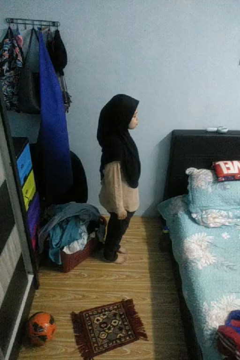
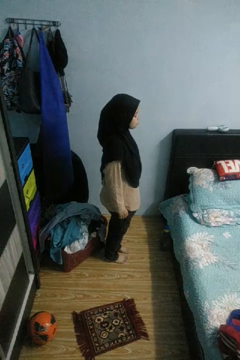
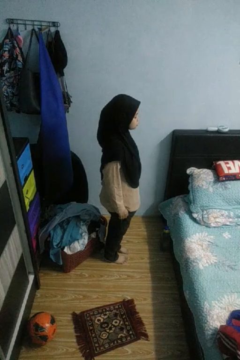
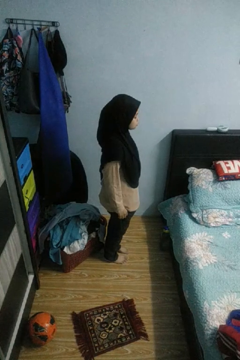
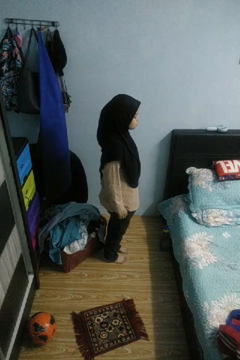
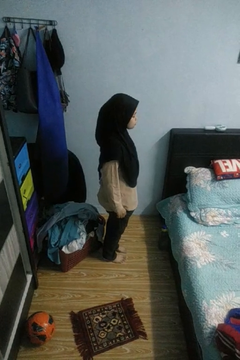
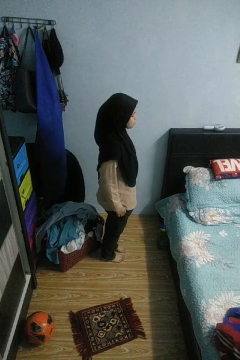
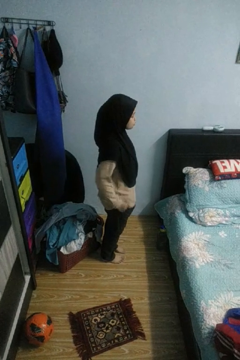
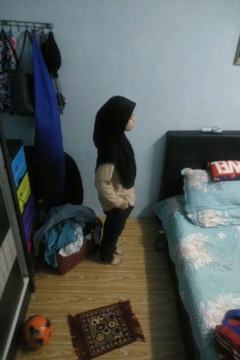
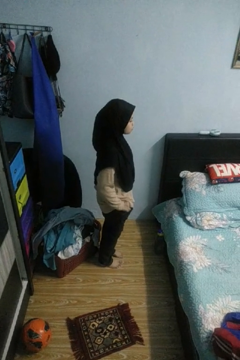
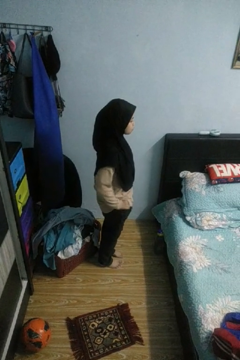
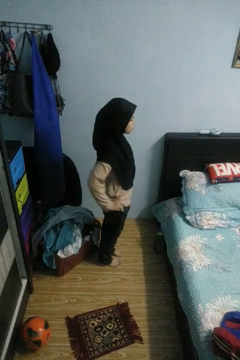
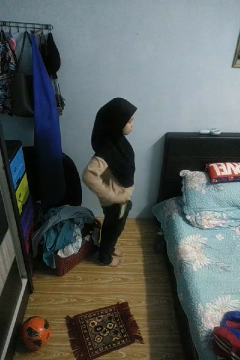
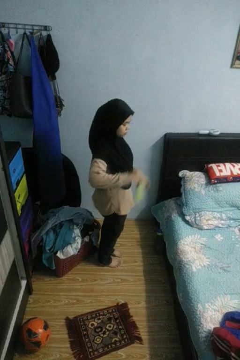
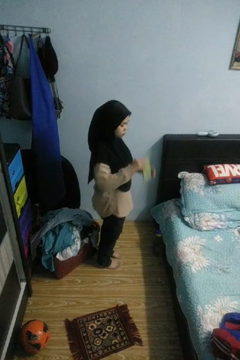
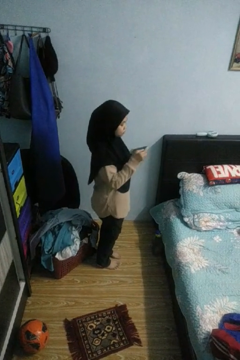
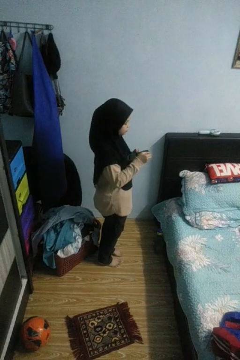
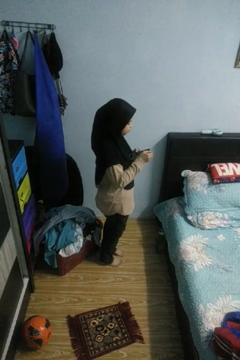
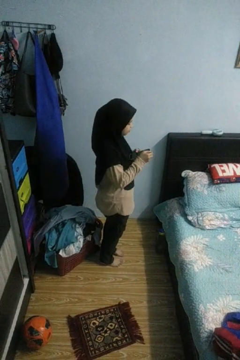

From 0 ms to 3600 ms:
person takes phone from pocket

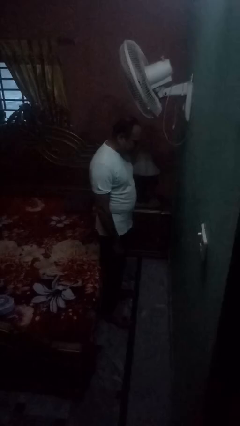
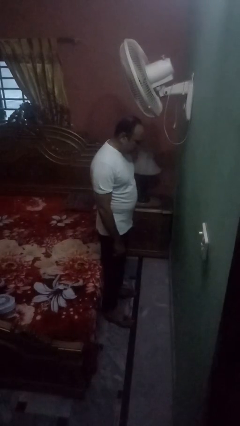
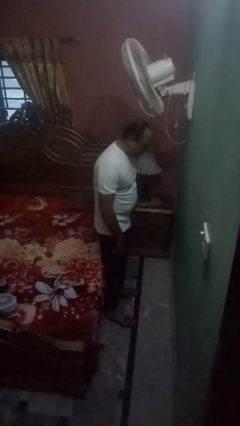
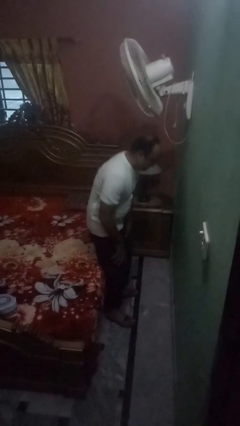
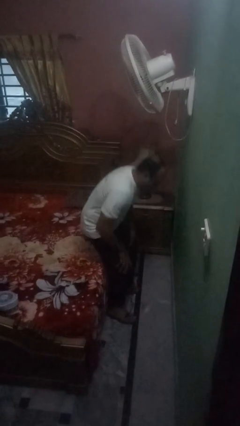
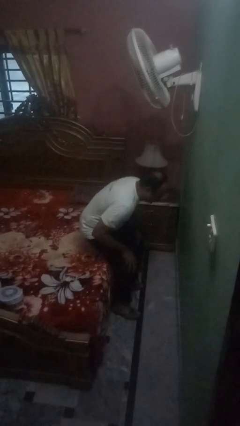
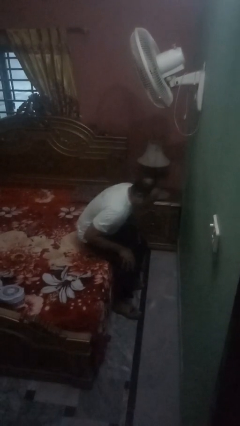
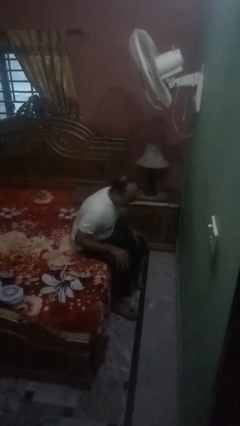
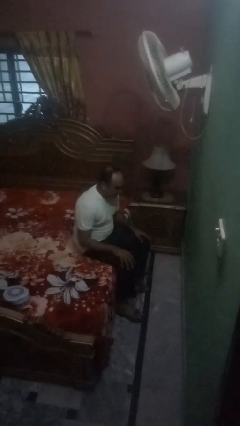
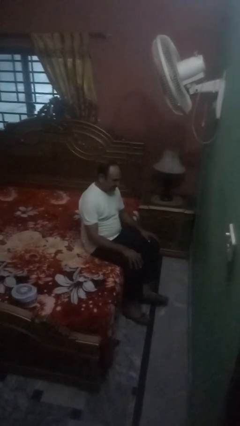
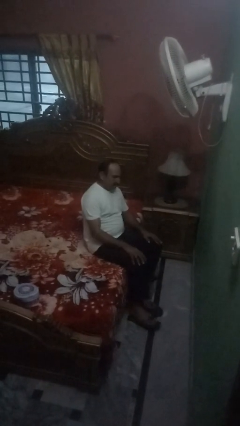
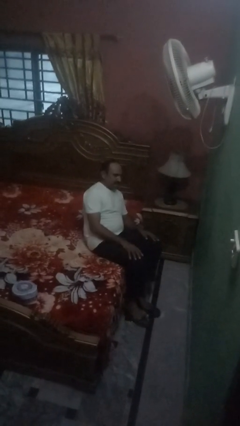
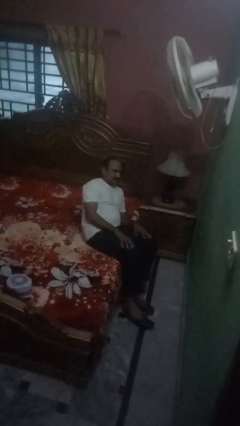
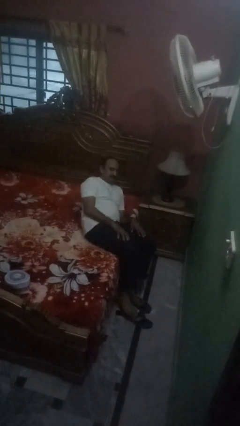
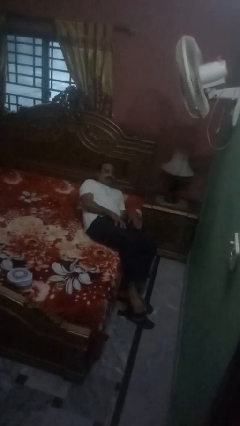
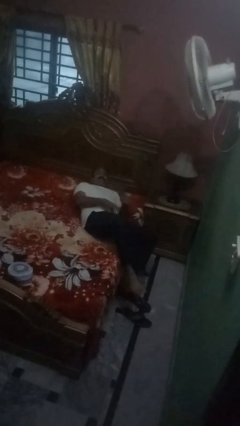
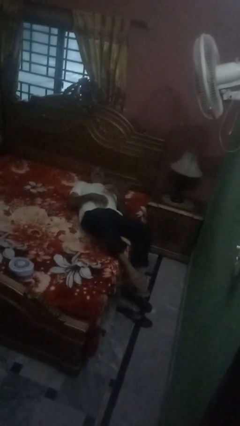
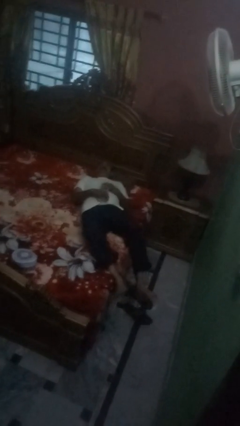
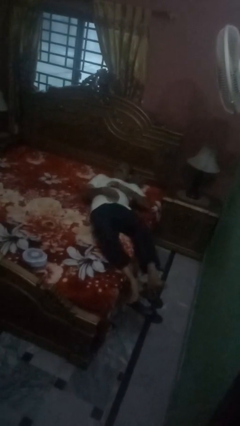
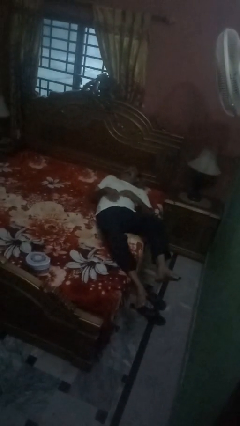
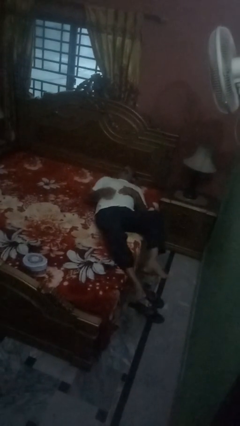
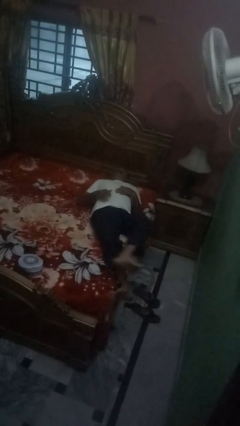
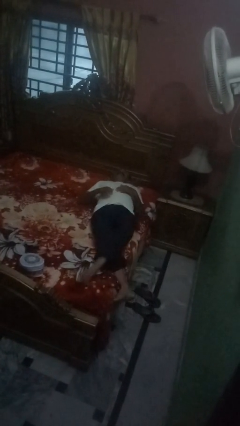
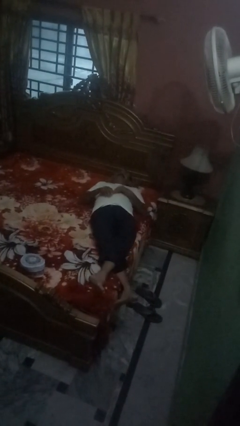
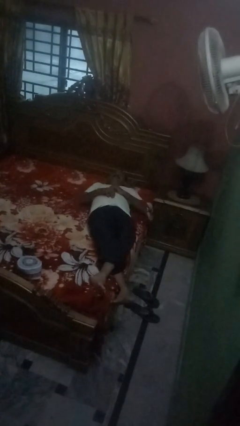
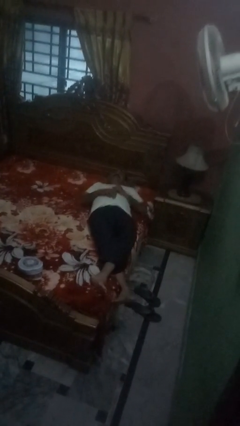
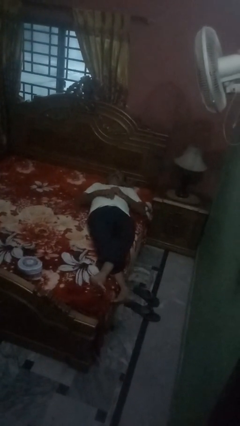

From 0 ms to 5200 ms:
person lies down on bed

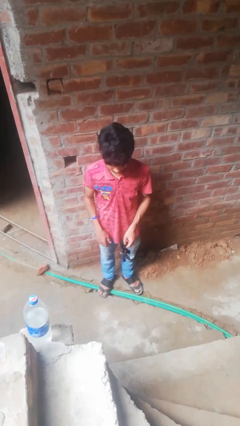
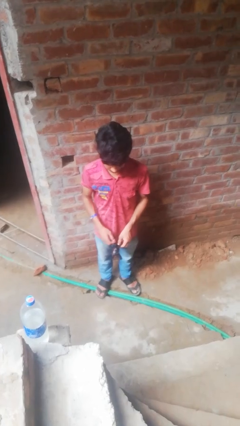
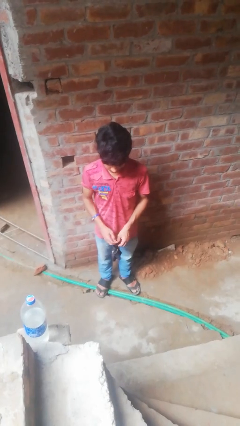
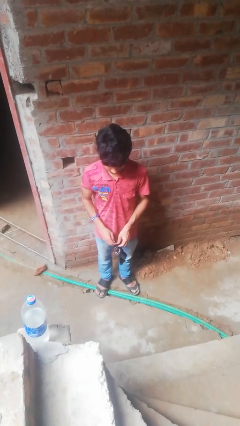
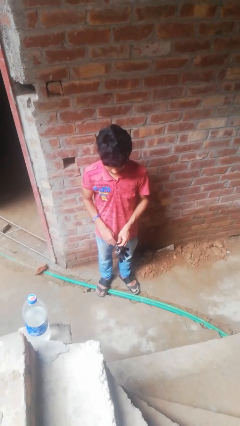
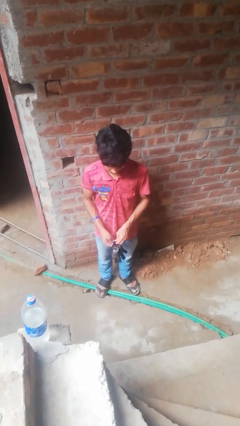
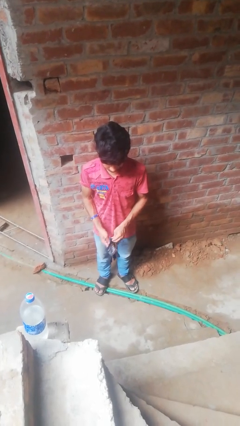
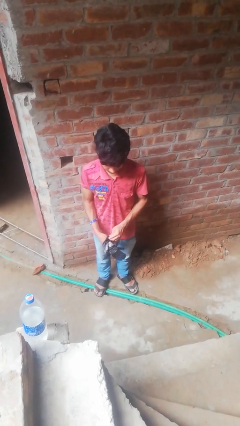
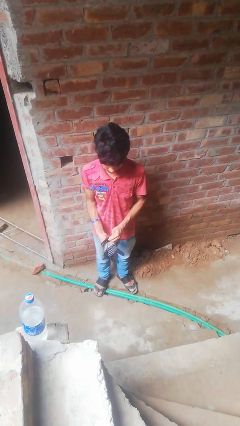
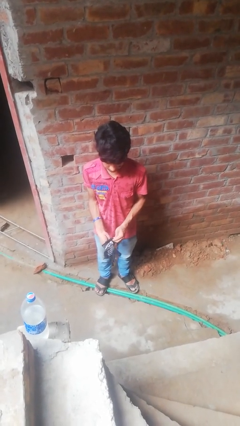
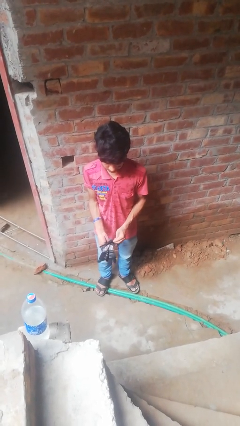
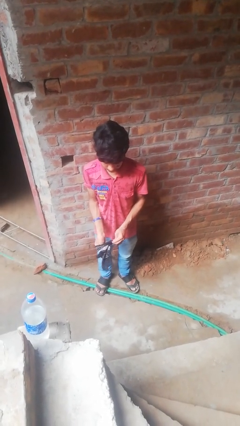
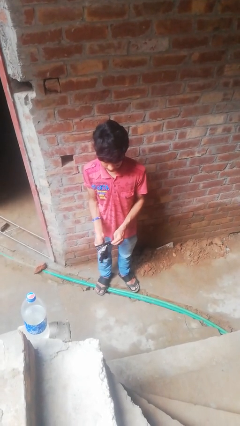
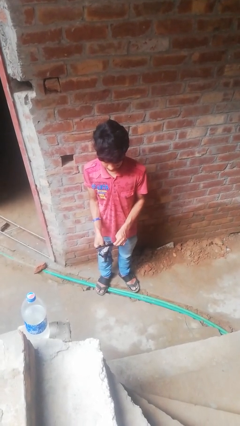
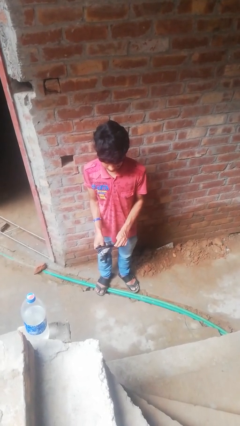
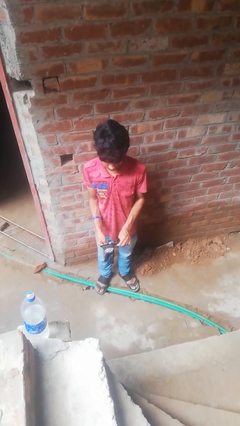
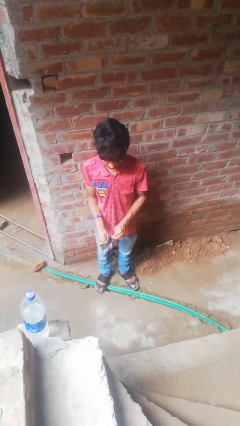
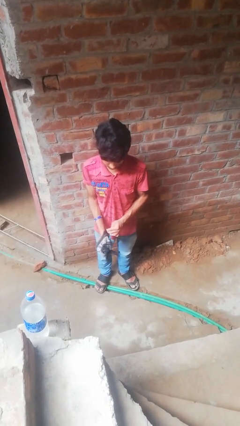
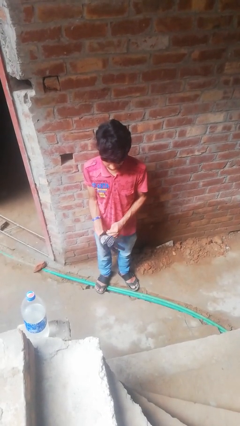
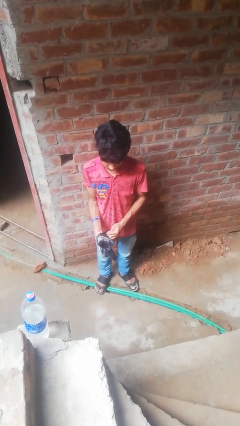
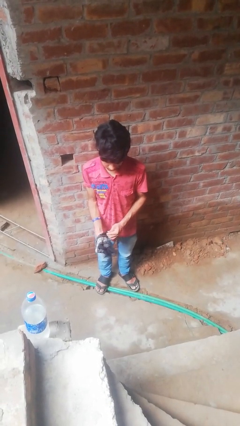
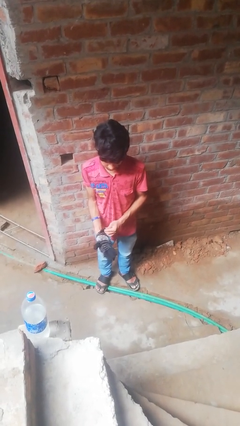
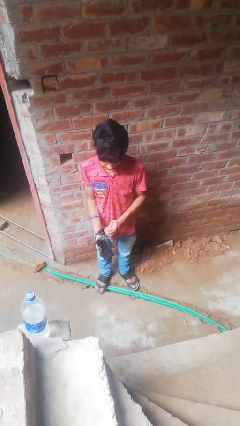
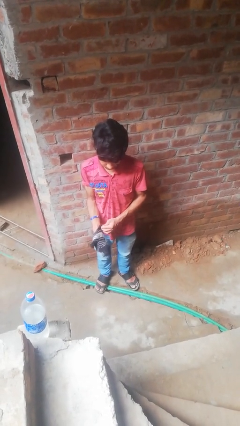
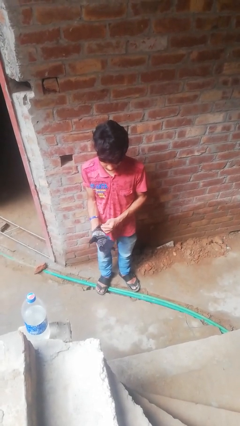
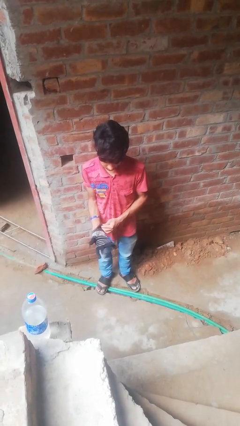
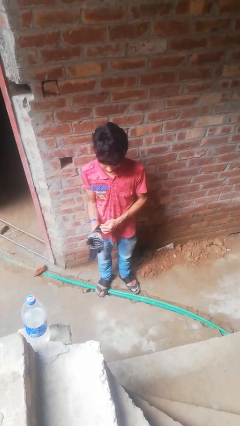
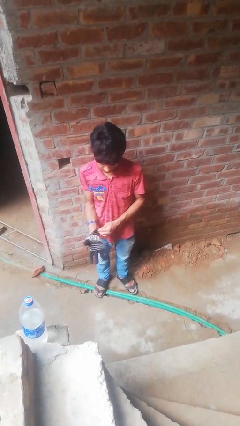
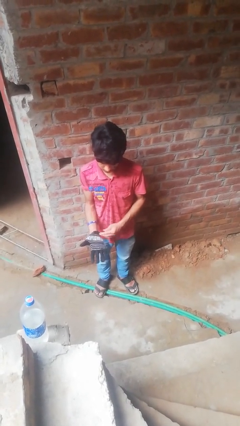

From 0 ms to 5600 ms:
person puts on gloves

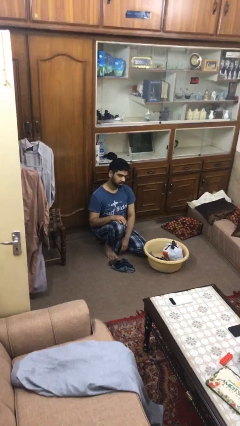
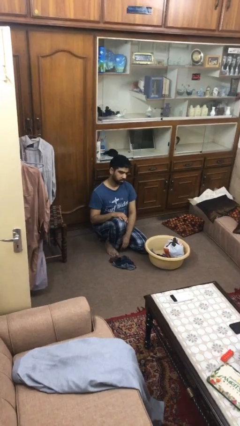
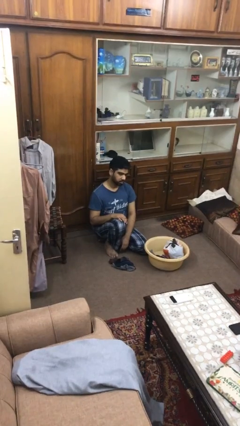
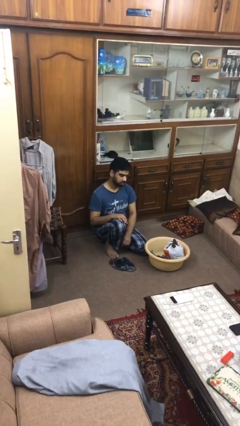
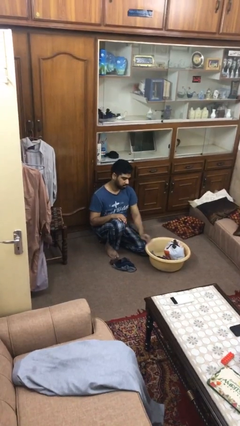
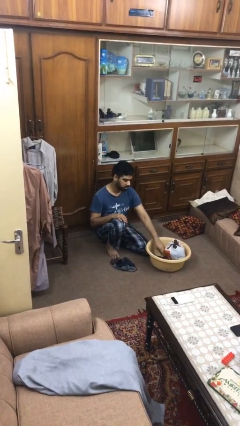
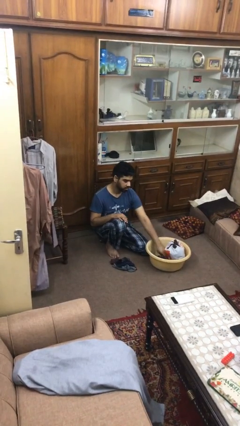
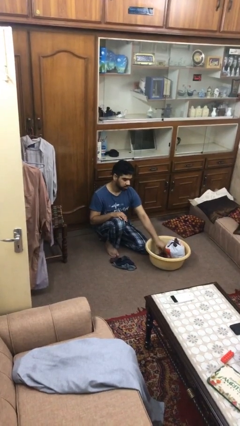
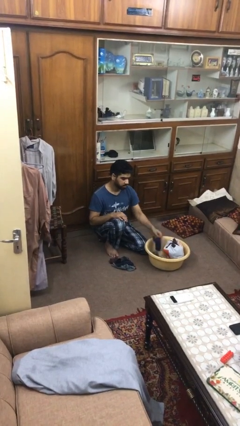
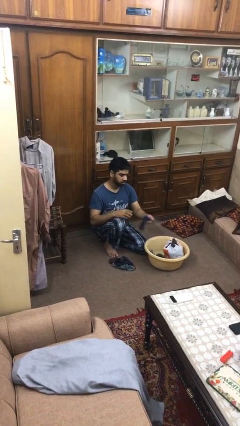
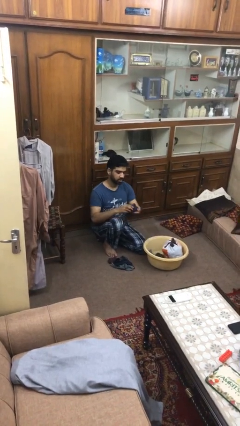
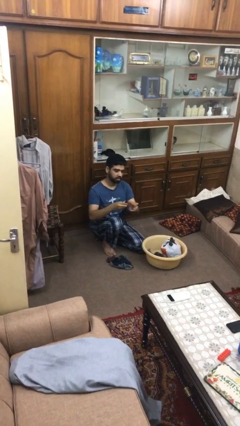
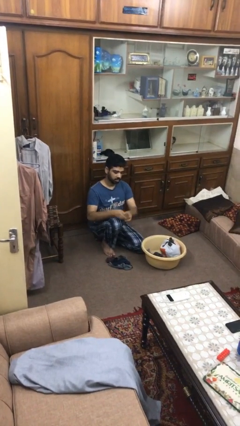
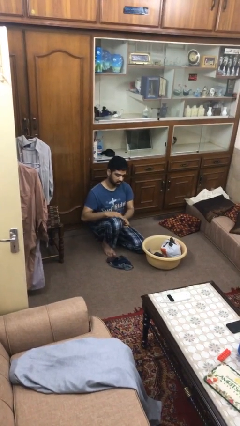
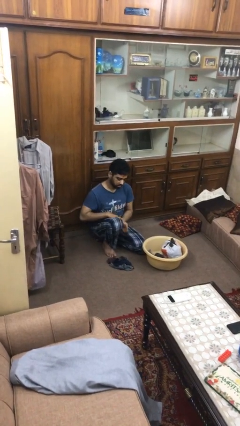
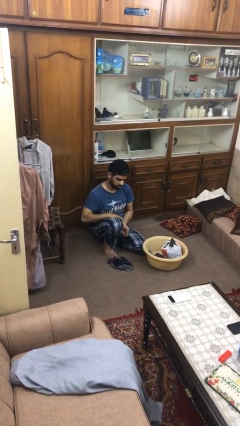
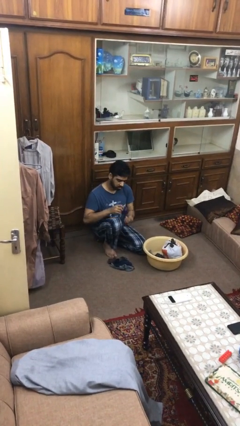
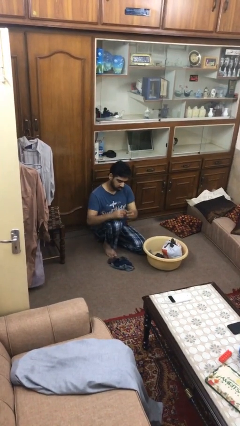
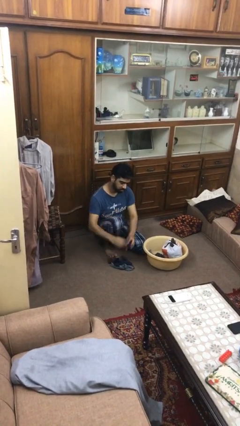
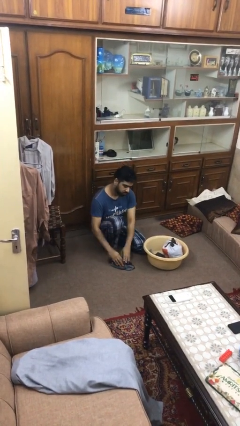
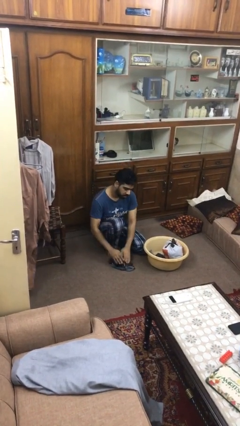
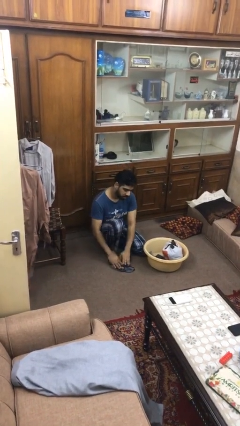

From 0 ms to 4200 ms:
person folds socks
